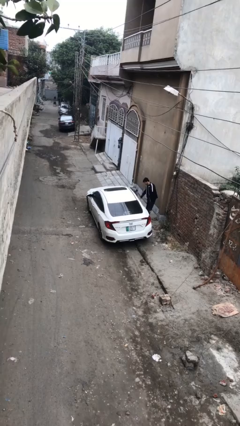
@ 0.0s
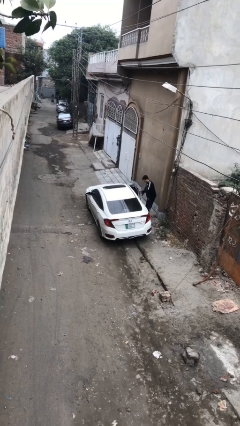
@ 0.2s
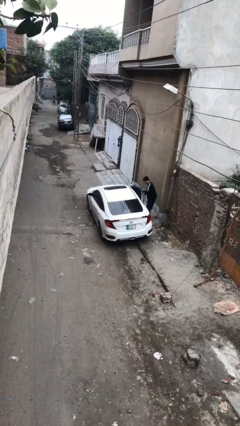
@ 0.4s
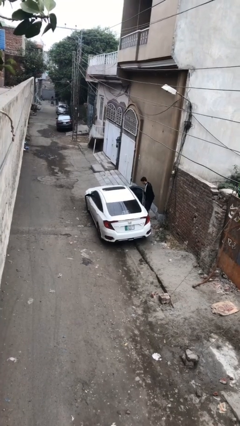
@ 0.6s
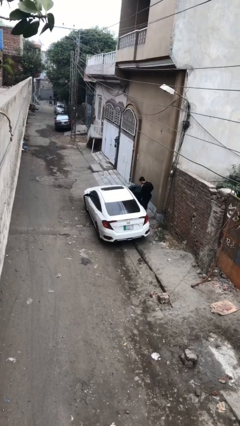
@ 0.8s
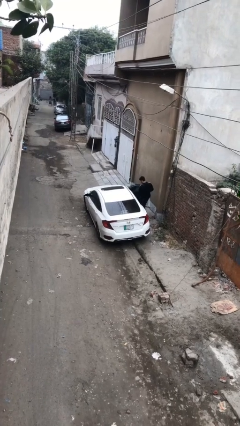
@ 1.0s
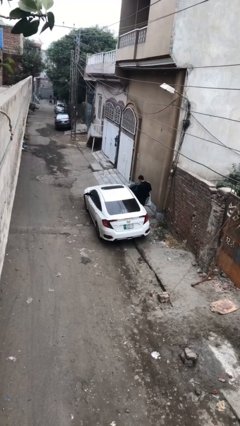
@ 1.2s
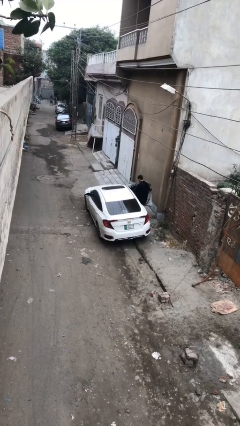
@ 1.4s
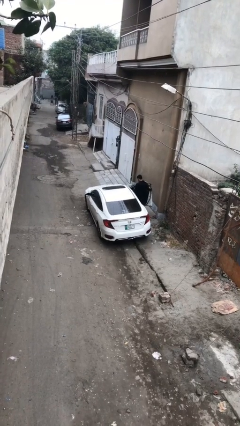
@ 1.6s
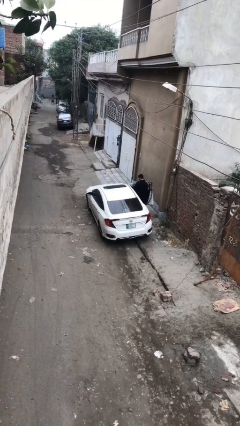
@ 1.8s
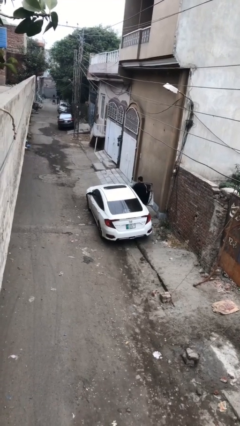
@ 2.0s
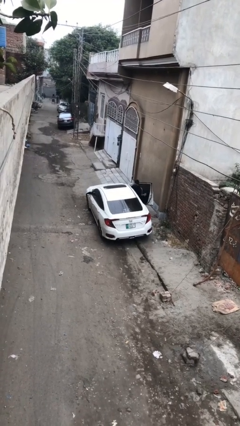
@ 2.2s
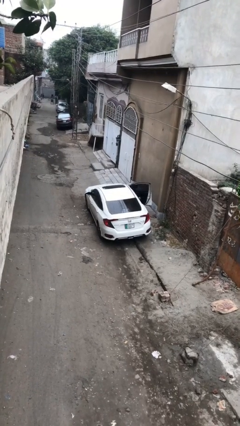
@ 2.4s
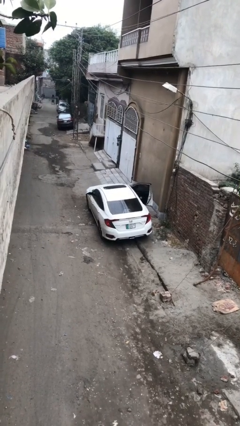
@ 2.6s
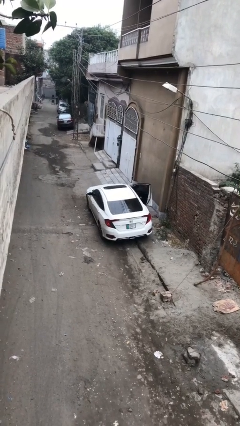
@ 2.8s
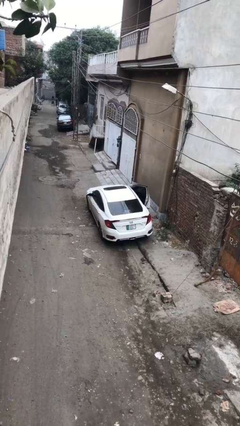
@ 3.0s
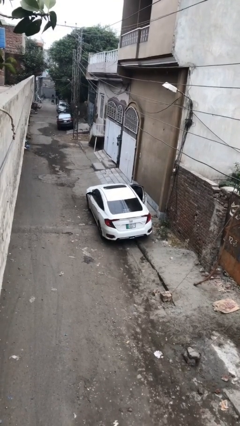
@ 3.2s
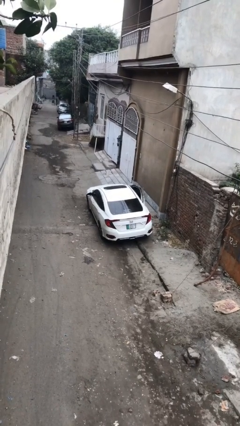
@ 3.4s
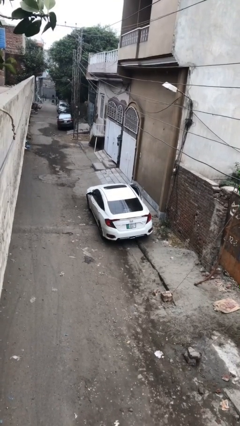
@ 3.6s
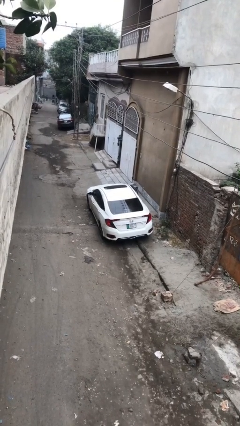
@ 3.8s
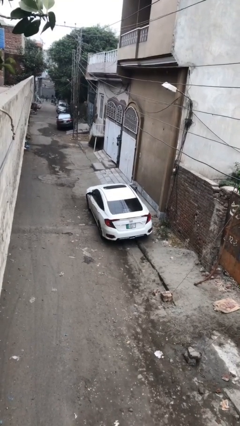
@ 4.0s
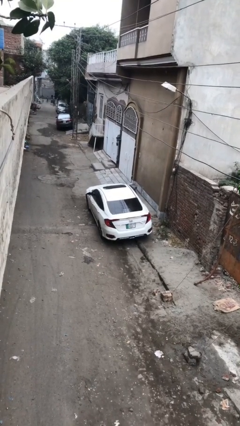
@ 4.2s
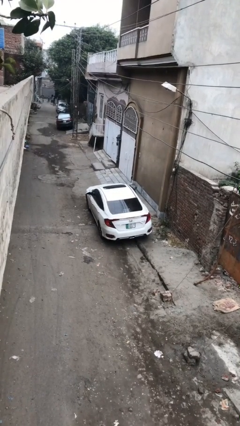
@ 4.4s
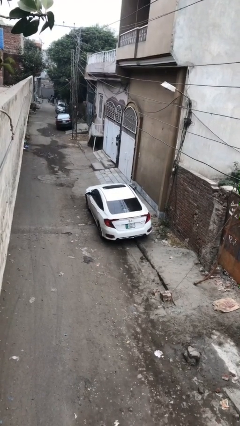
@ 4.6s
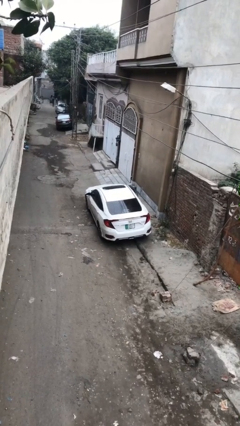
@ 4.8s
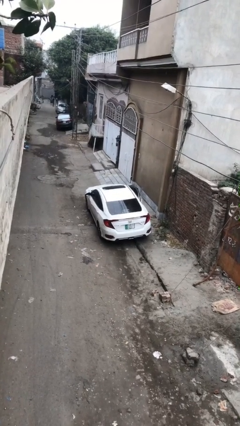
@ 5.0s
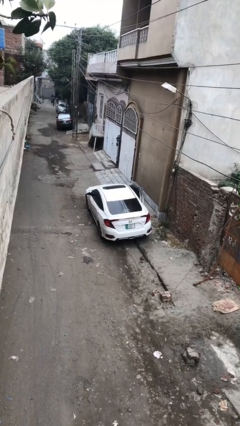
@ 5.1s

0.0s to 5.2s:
car picks up person

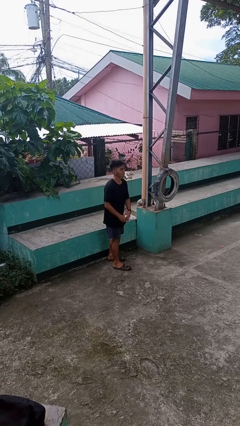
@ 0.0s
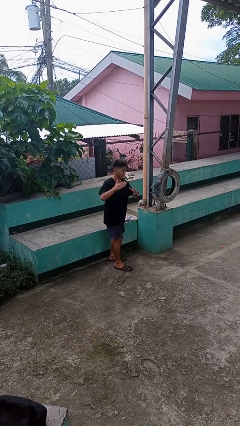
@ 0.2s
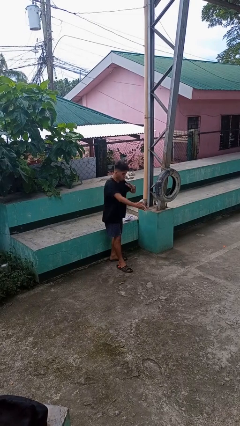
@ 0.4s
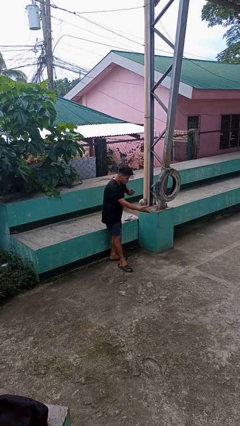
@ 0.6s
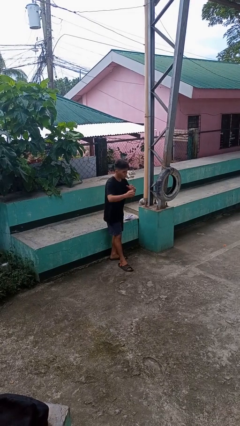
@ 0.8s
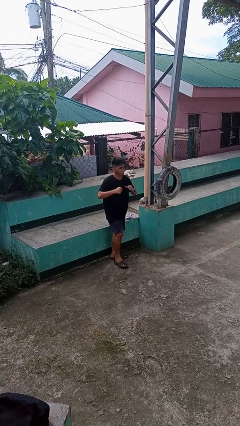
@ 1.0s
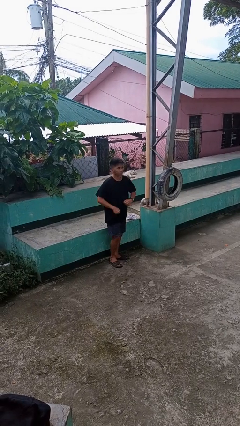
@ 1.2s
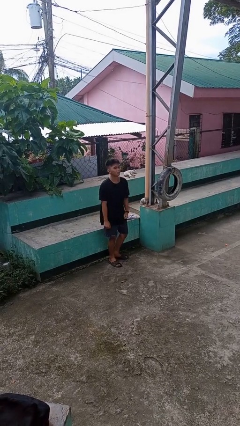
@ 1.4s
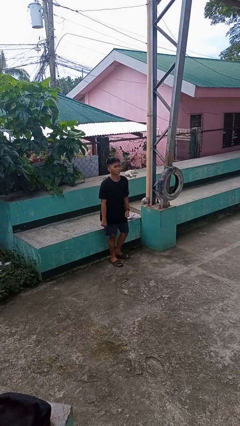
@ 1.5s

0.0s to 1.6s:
person karate chop

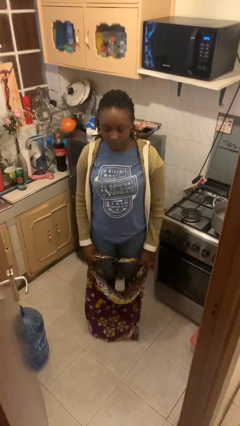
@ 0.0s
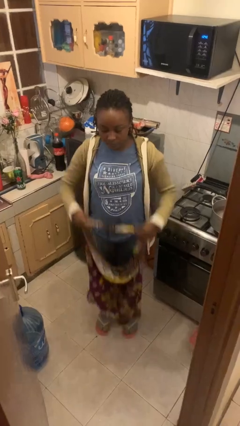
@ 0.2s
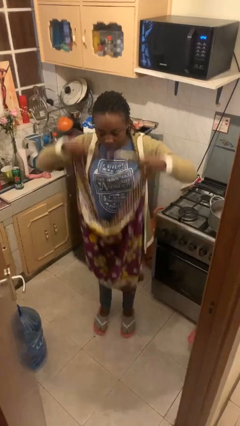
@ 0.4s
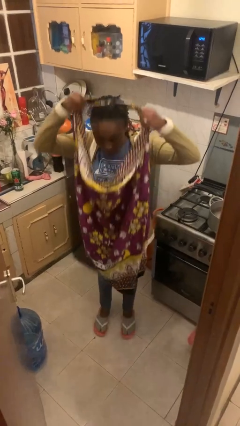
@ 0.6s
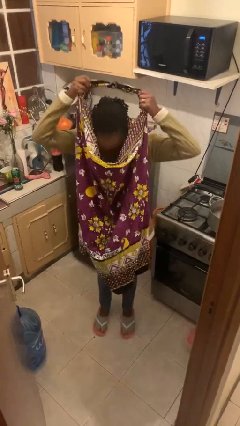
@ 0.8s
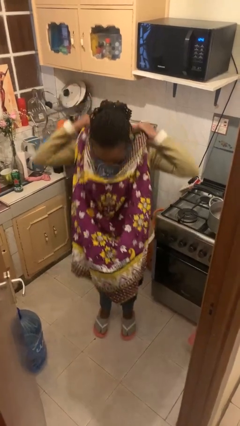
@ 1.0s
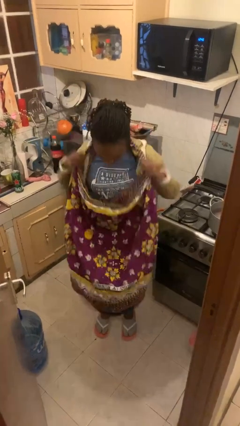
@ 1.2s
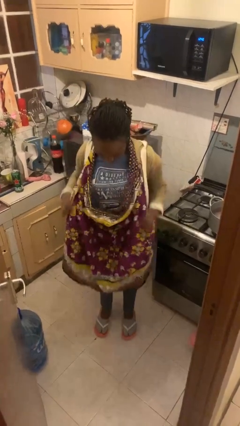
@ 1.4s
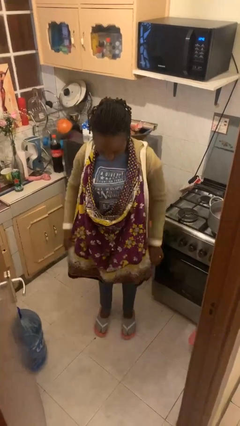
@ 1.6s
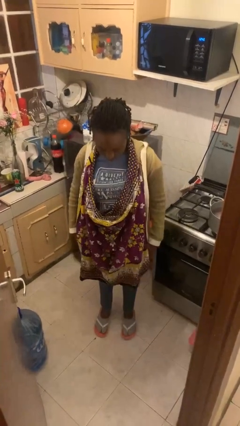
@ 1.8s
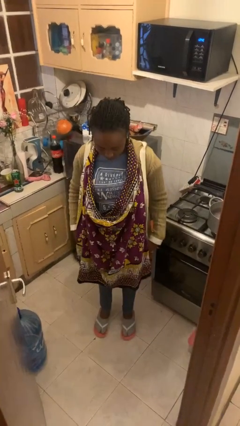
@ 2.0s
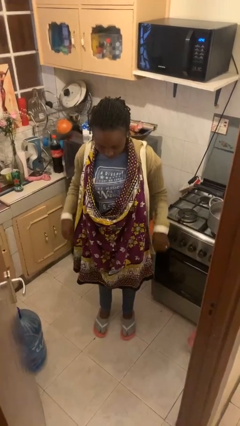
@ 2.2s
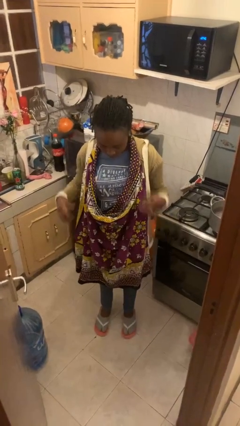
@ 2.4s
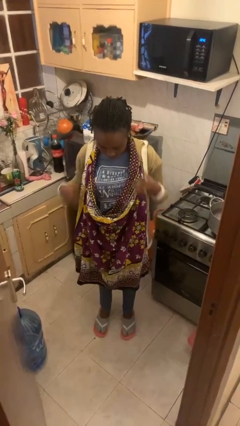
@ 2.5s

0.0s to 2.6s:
person puts on apron

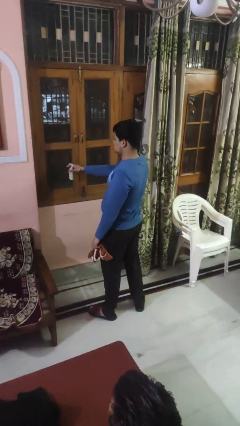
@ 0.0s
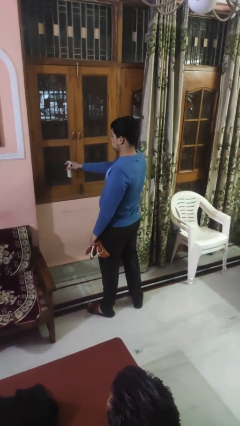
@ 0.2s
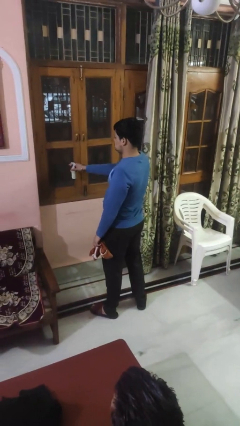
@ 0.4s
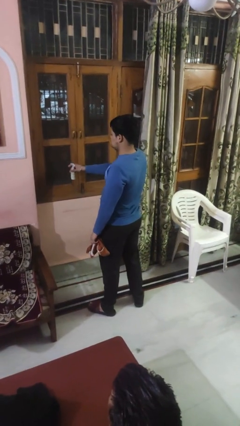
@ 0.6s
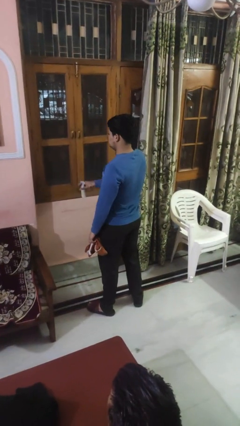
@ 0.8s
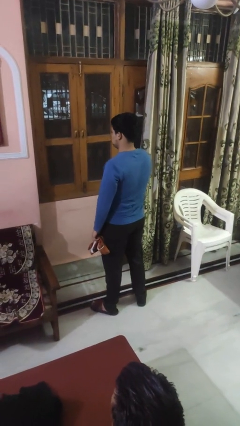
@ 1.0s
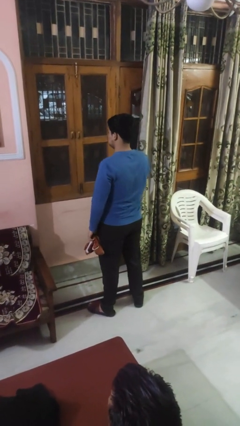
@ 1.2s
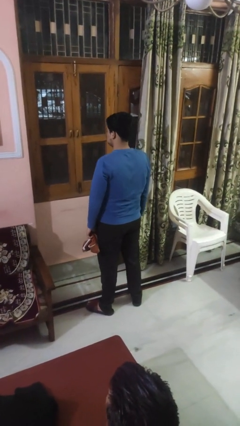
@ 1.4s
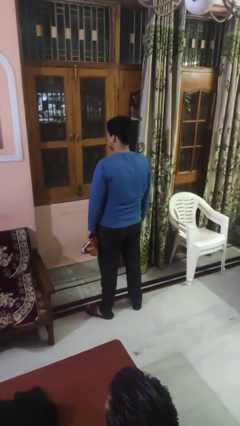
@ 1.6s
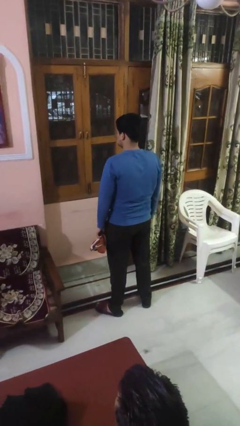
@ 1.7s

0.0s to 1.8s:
person sprays from bottle

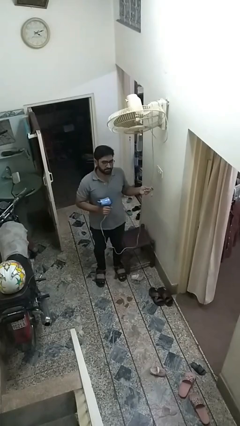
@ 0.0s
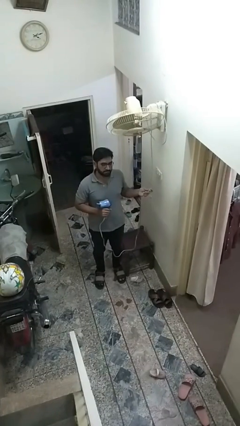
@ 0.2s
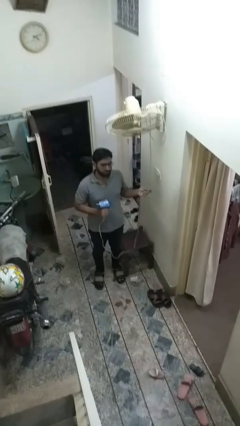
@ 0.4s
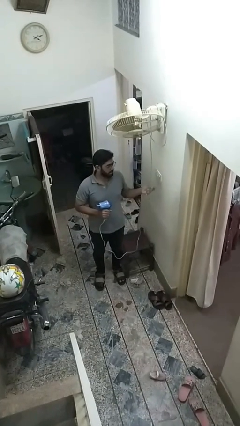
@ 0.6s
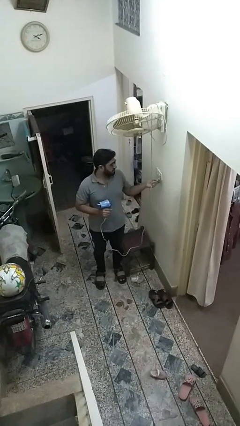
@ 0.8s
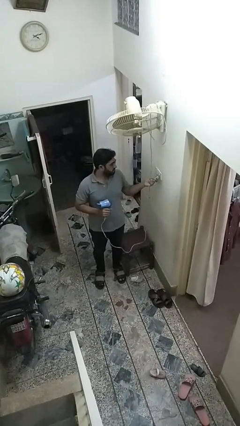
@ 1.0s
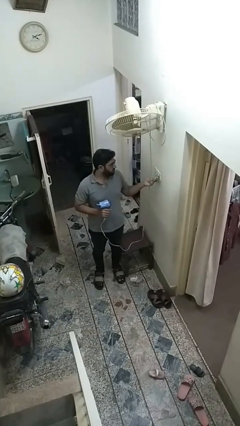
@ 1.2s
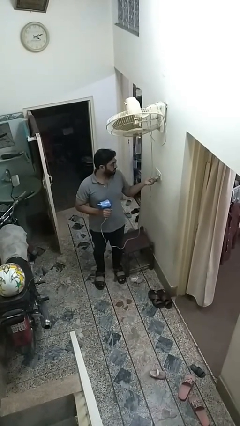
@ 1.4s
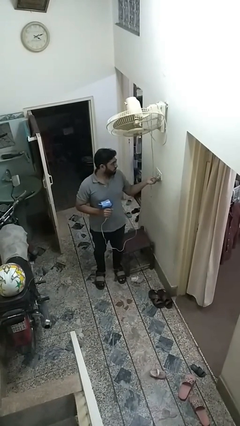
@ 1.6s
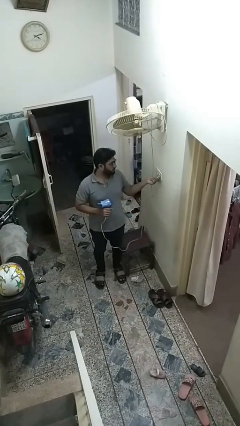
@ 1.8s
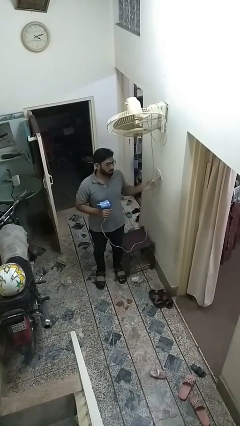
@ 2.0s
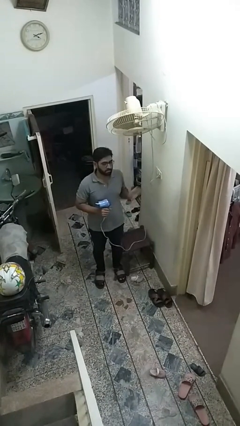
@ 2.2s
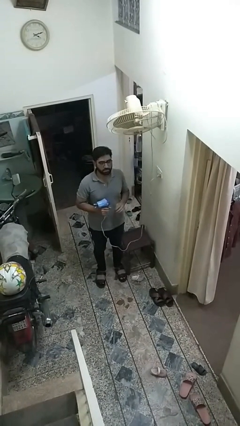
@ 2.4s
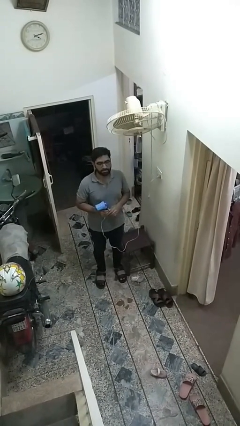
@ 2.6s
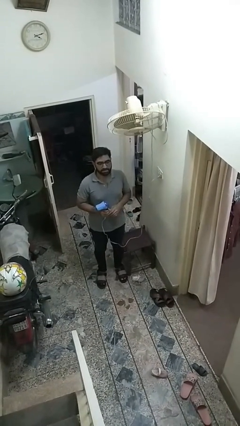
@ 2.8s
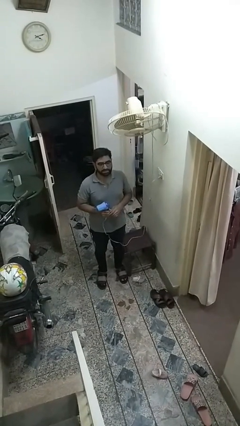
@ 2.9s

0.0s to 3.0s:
person plugs into electrical socket

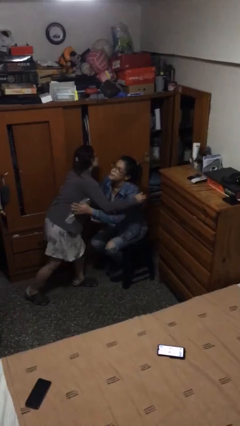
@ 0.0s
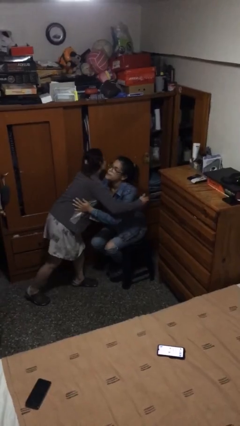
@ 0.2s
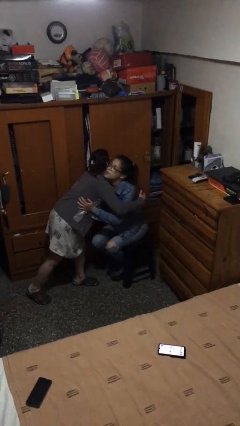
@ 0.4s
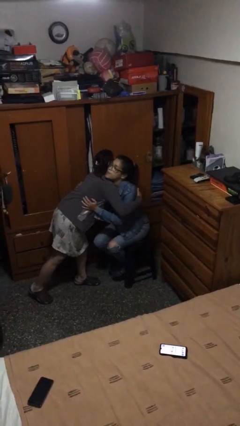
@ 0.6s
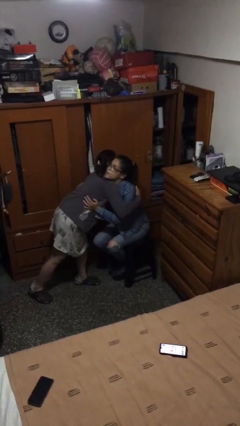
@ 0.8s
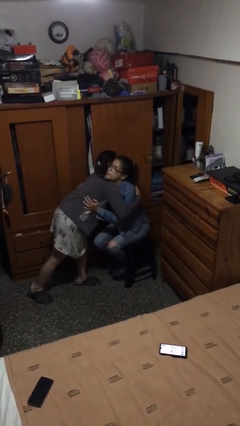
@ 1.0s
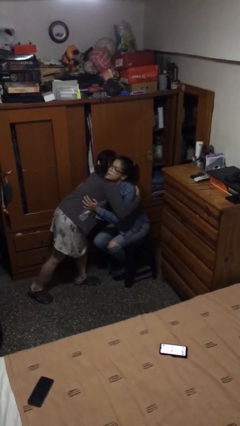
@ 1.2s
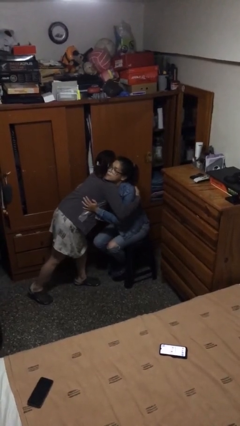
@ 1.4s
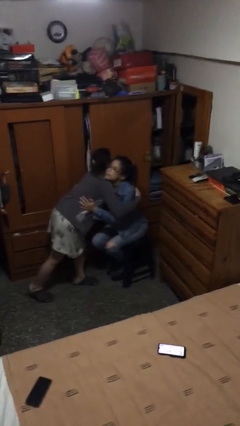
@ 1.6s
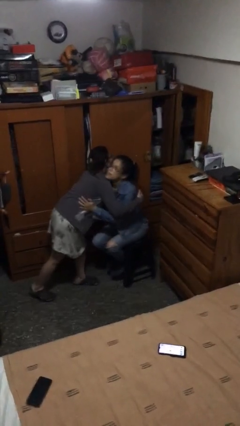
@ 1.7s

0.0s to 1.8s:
person embraces person

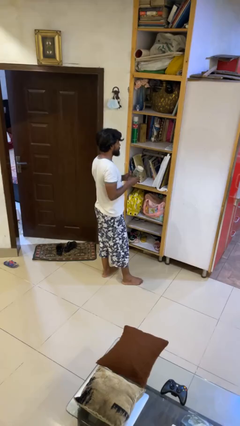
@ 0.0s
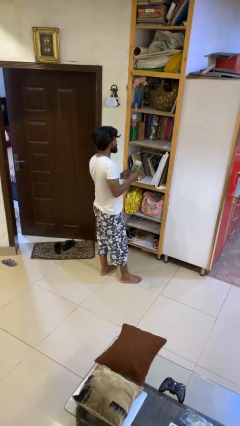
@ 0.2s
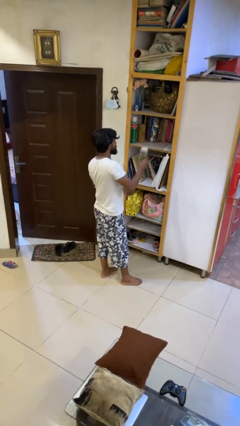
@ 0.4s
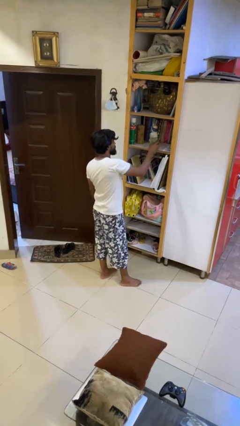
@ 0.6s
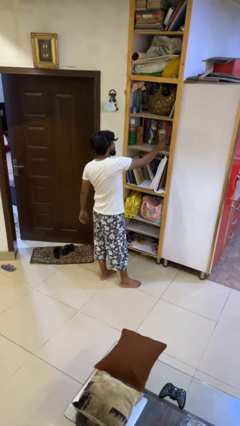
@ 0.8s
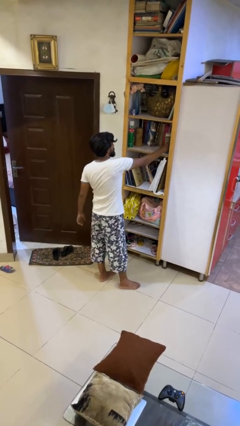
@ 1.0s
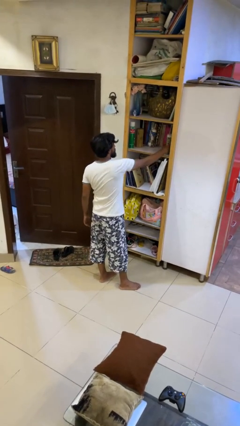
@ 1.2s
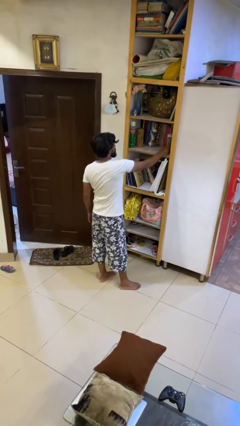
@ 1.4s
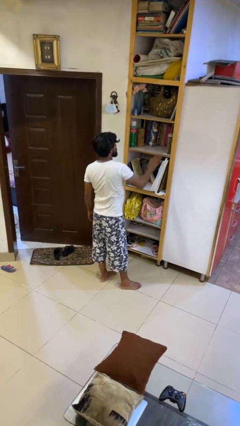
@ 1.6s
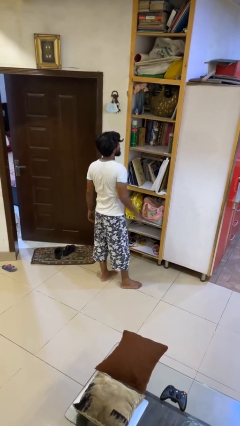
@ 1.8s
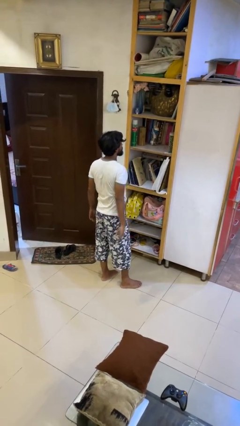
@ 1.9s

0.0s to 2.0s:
person puts down object into cabinet
